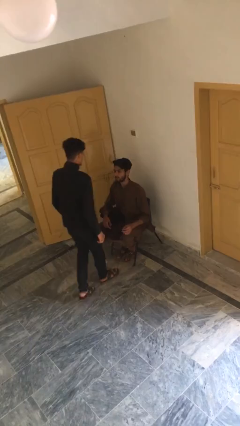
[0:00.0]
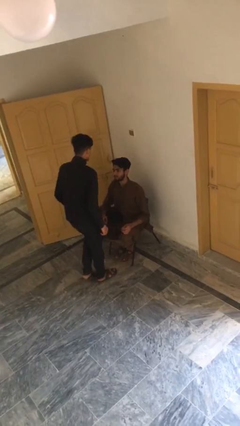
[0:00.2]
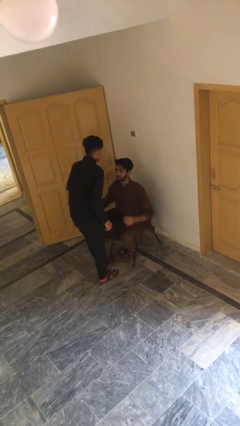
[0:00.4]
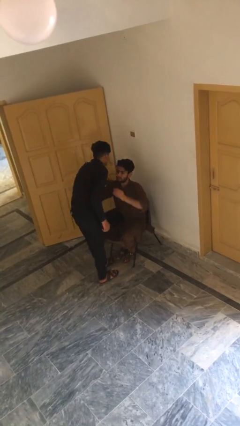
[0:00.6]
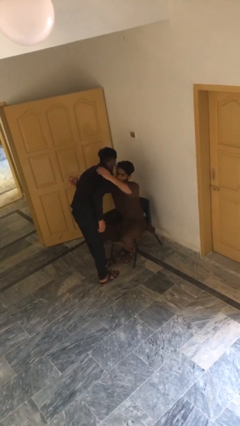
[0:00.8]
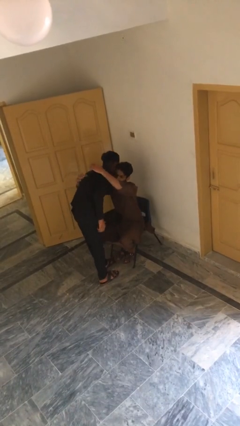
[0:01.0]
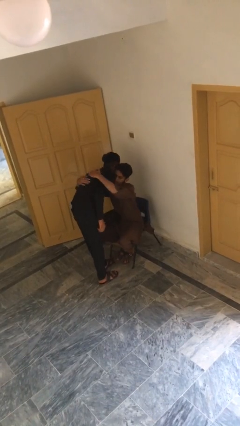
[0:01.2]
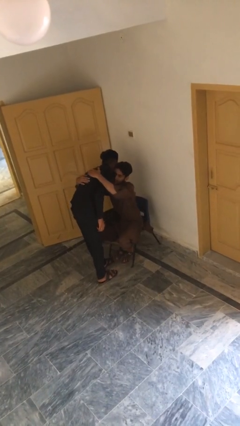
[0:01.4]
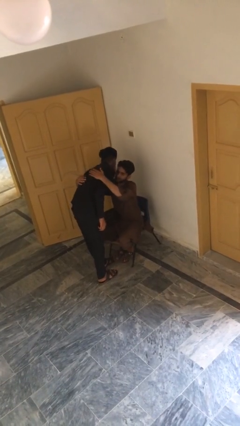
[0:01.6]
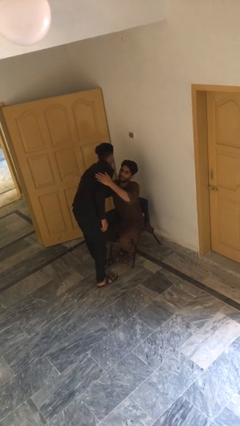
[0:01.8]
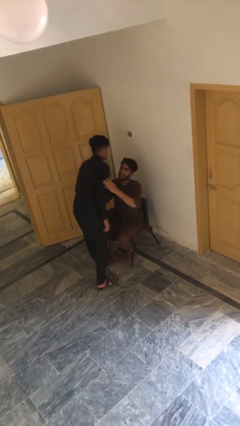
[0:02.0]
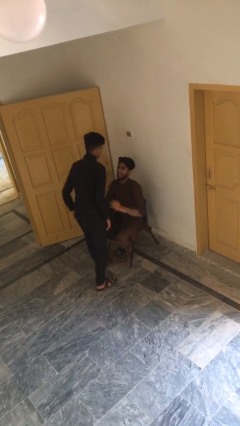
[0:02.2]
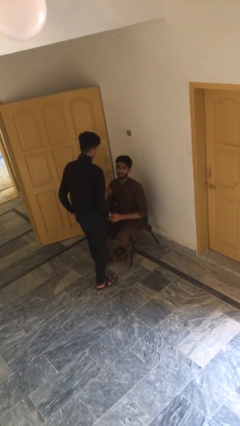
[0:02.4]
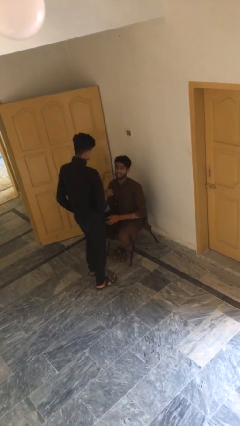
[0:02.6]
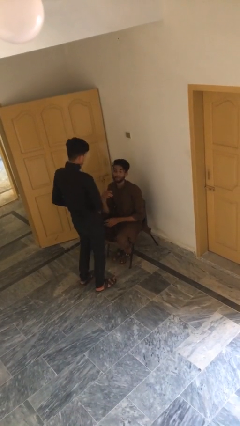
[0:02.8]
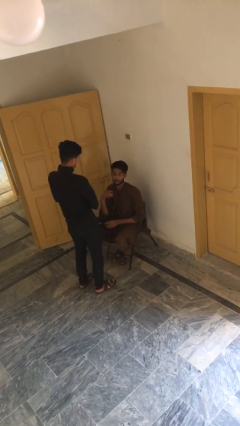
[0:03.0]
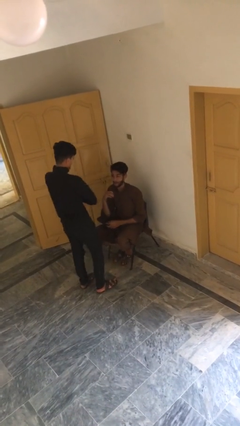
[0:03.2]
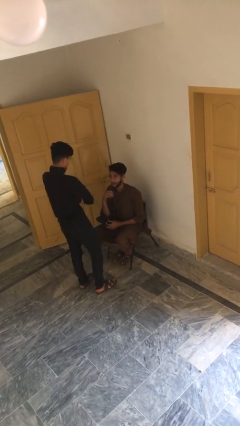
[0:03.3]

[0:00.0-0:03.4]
person embraces person

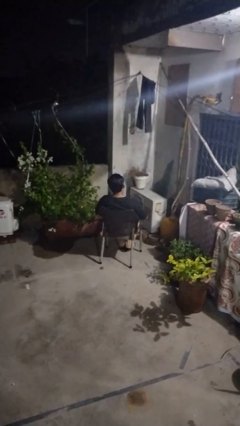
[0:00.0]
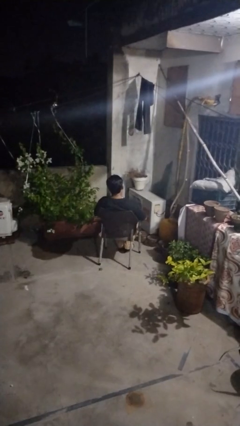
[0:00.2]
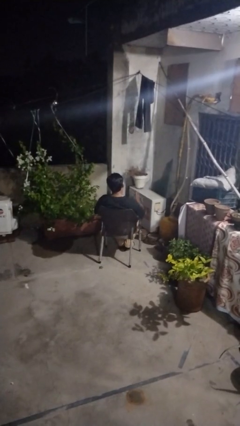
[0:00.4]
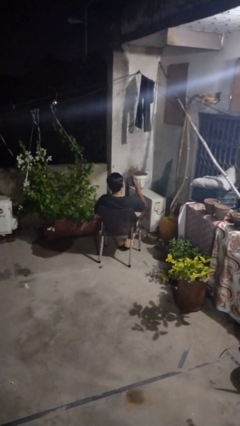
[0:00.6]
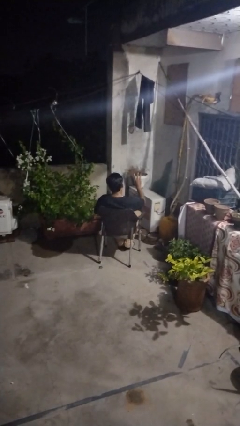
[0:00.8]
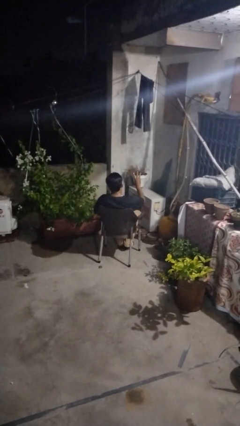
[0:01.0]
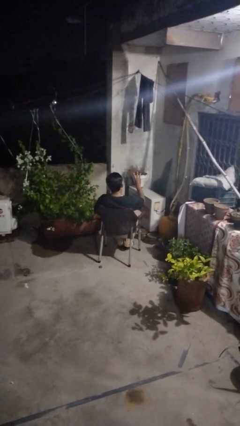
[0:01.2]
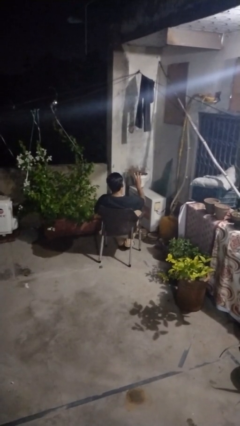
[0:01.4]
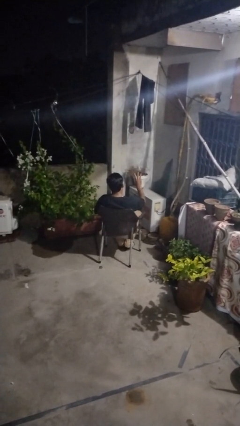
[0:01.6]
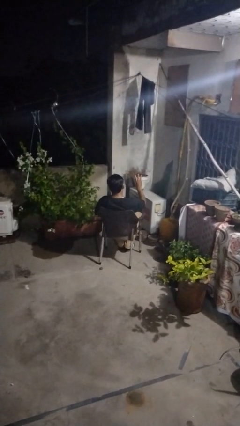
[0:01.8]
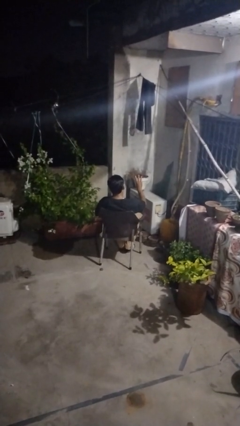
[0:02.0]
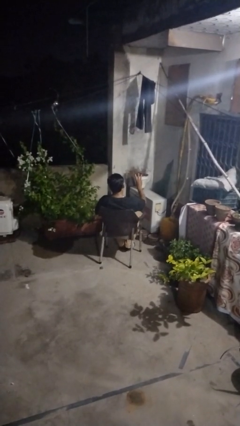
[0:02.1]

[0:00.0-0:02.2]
person gestures number three

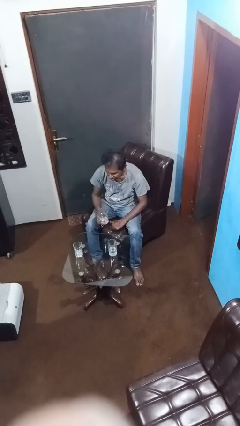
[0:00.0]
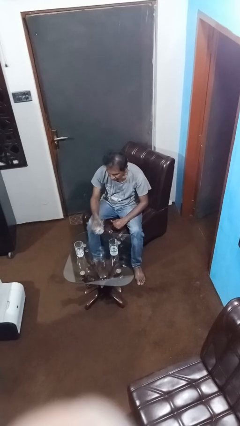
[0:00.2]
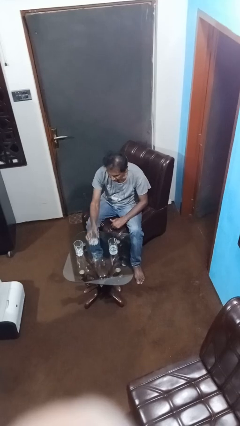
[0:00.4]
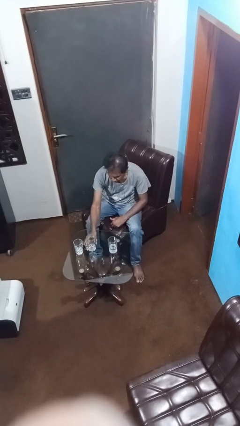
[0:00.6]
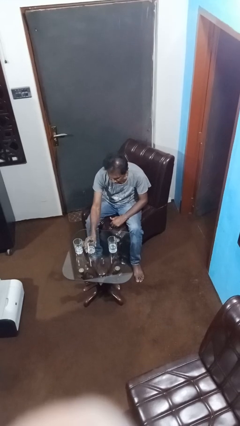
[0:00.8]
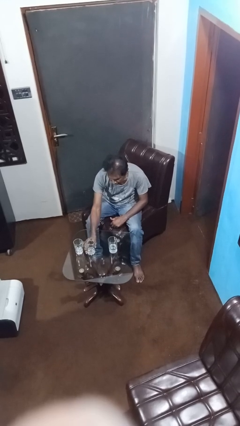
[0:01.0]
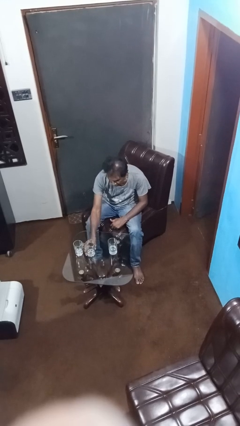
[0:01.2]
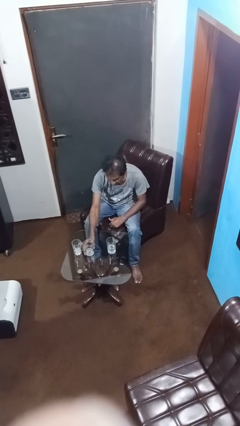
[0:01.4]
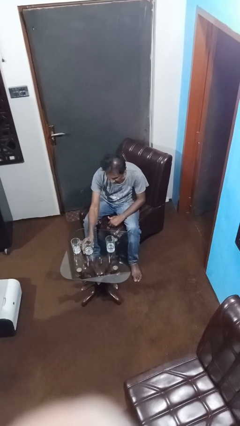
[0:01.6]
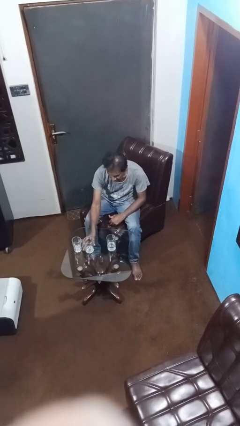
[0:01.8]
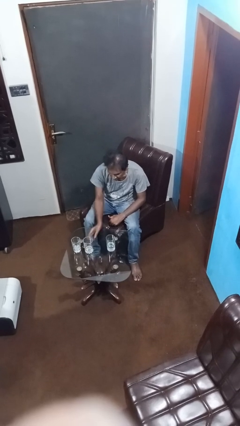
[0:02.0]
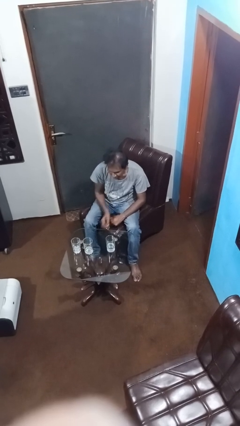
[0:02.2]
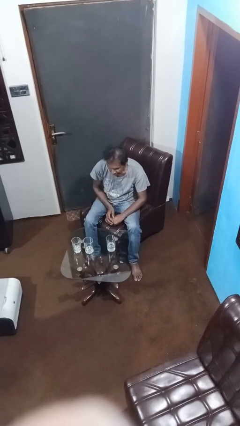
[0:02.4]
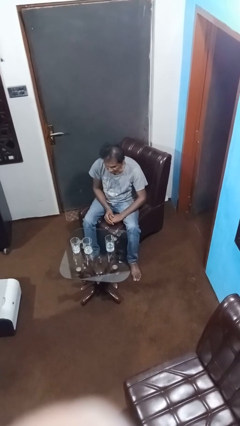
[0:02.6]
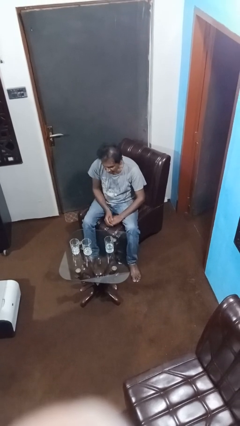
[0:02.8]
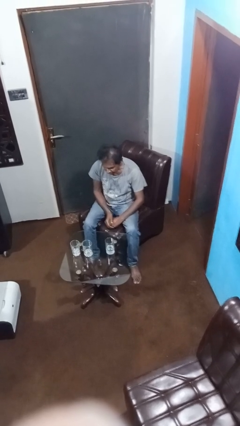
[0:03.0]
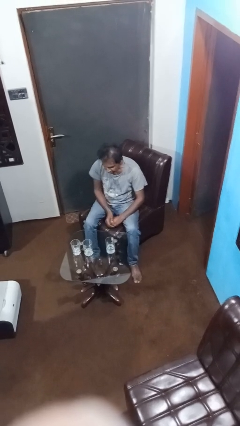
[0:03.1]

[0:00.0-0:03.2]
person puts down object on table

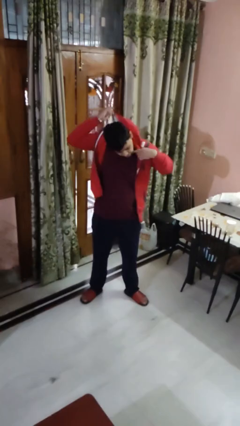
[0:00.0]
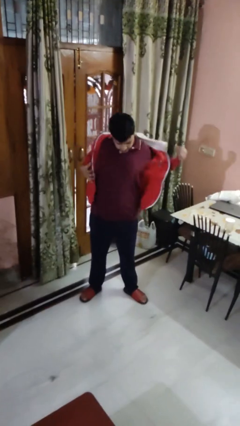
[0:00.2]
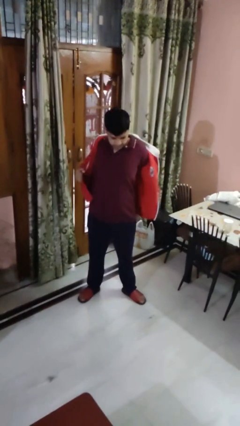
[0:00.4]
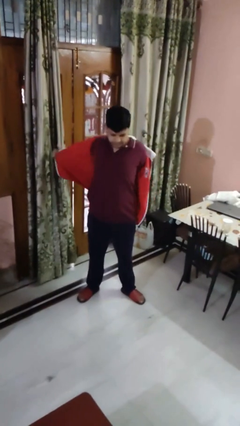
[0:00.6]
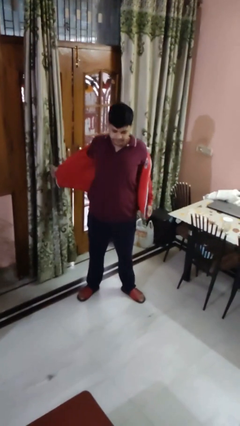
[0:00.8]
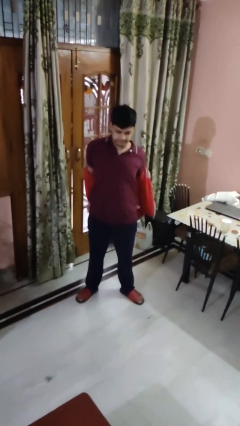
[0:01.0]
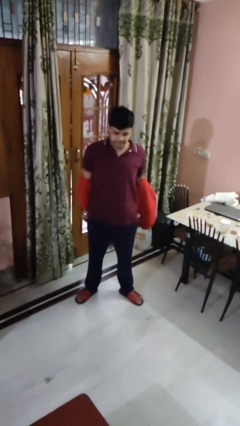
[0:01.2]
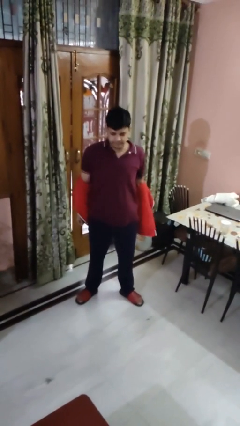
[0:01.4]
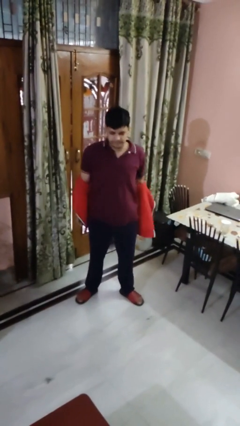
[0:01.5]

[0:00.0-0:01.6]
person takes off hoodie

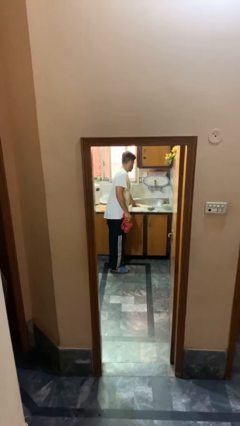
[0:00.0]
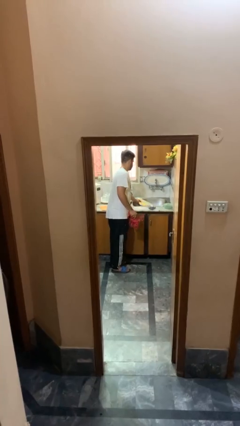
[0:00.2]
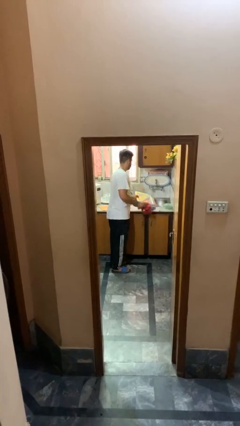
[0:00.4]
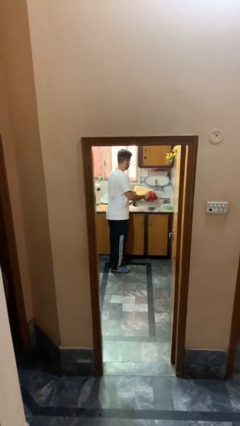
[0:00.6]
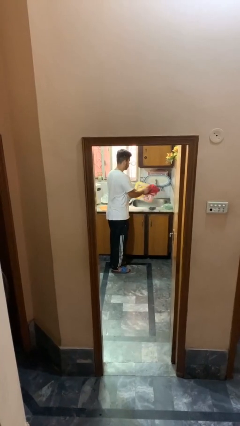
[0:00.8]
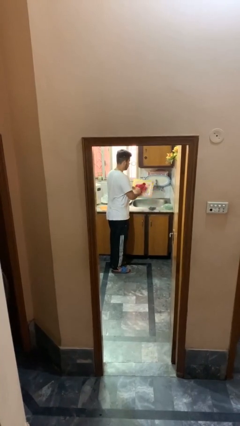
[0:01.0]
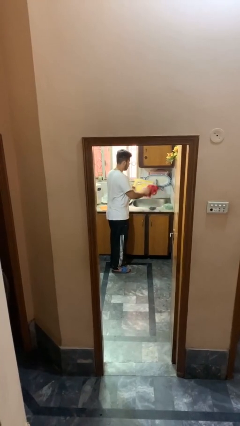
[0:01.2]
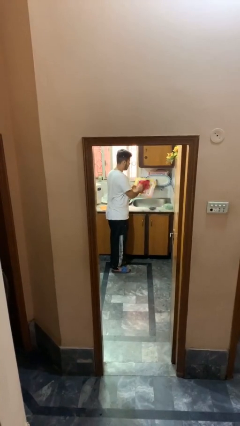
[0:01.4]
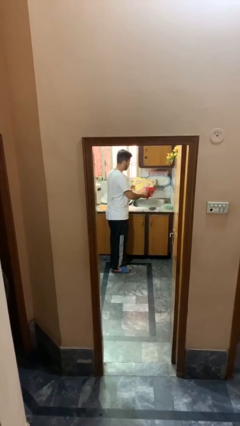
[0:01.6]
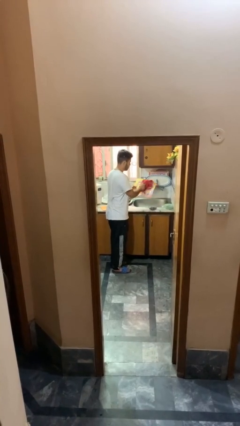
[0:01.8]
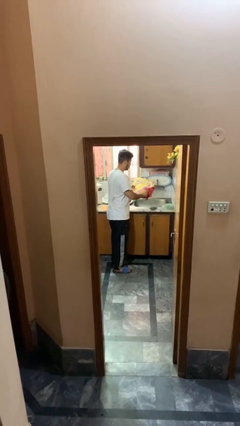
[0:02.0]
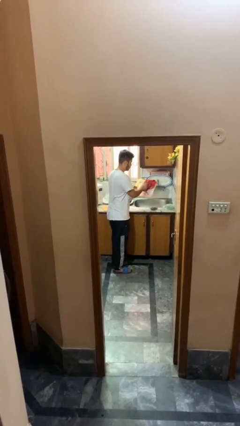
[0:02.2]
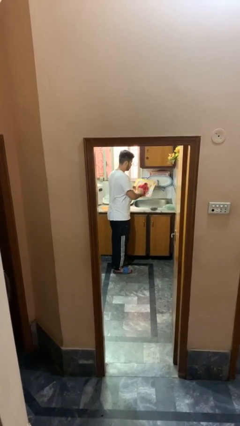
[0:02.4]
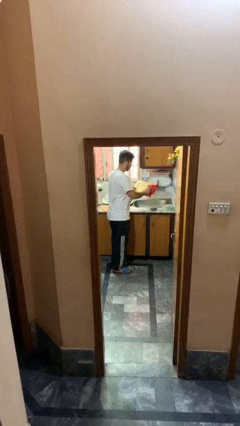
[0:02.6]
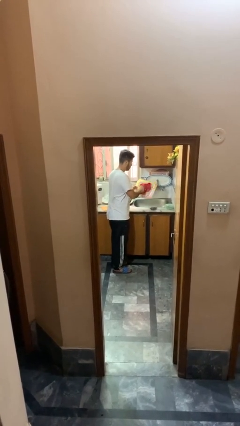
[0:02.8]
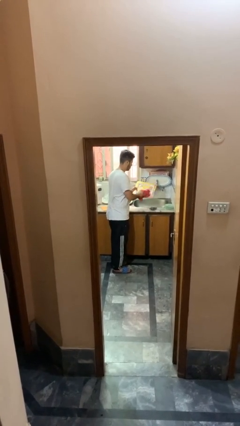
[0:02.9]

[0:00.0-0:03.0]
person dries dish

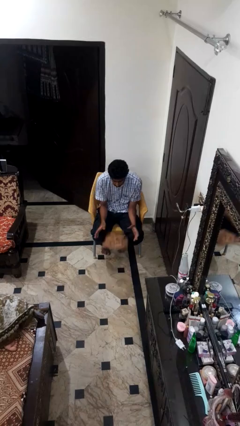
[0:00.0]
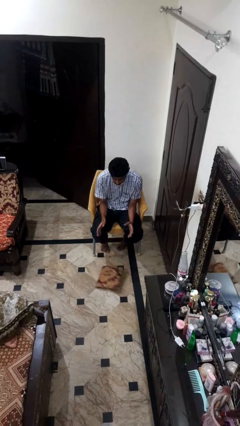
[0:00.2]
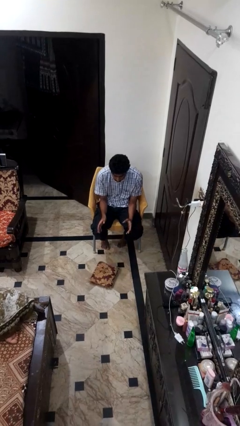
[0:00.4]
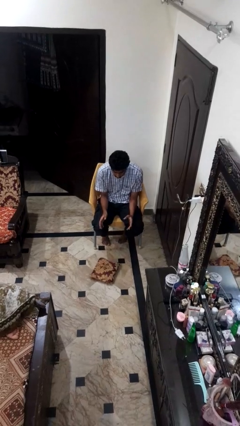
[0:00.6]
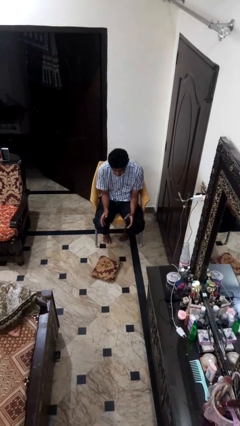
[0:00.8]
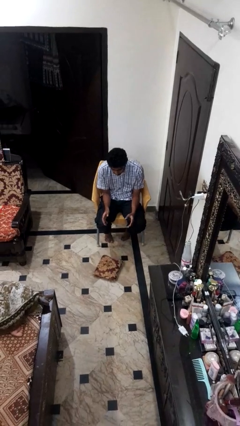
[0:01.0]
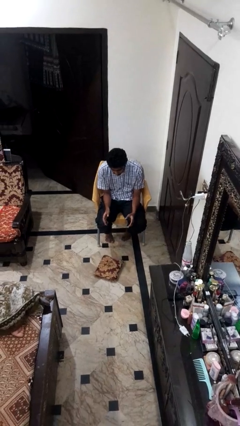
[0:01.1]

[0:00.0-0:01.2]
person drops object

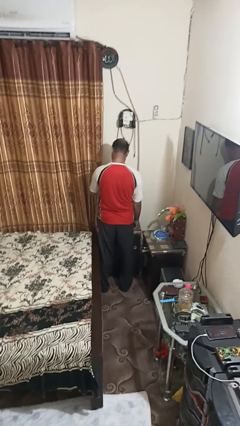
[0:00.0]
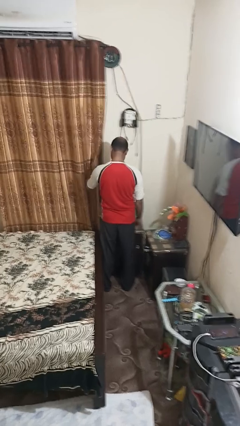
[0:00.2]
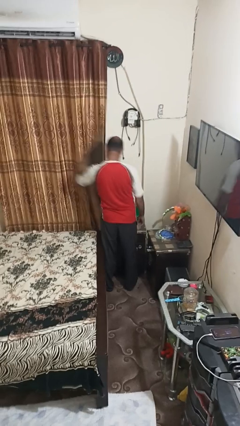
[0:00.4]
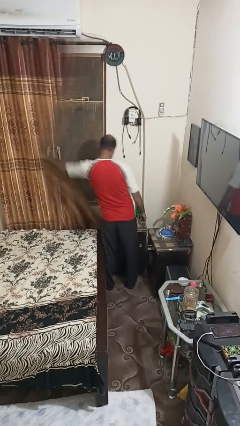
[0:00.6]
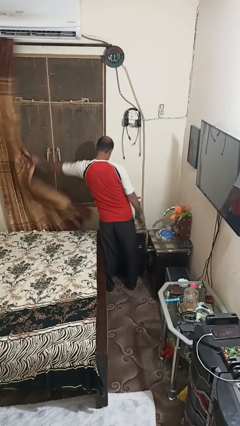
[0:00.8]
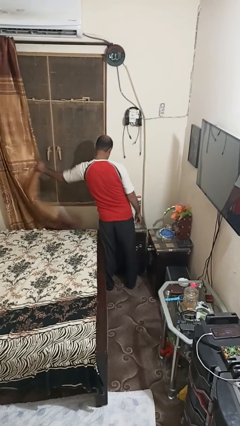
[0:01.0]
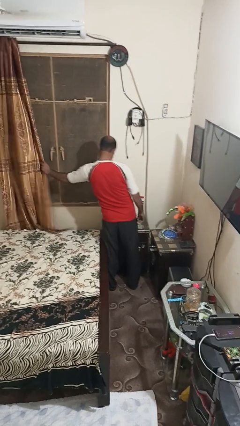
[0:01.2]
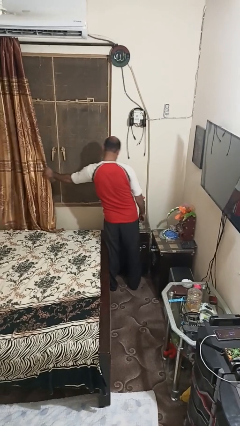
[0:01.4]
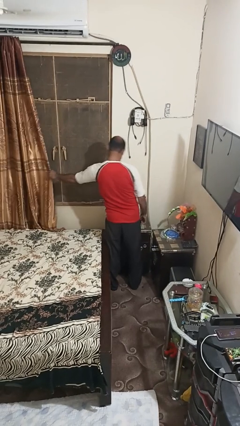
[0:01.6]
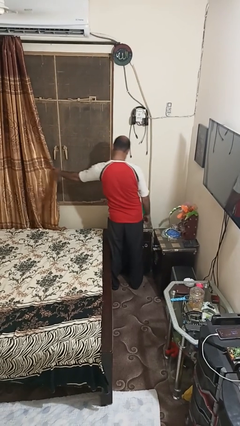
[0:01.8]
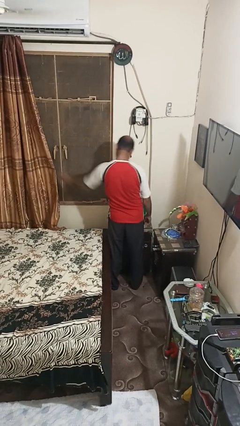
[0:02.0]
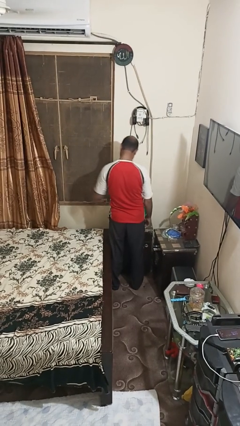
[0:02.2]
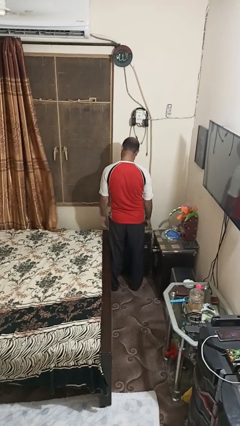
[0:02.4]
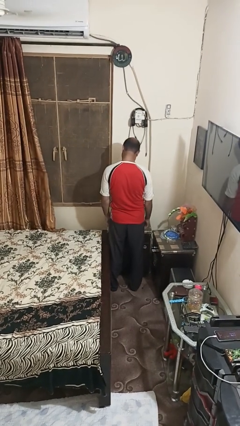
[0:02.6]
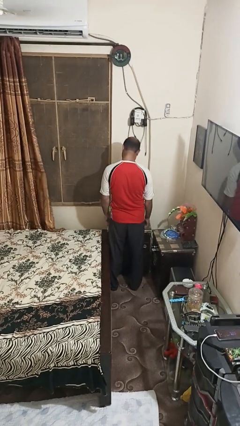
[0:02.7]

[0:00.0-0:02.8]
person opens curtains
